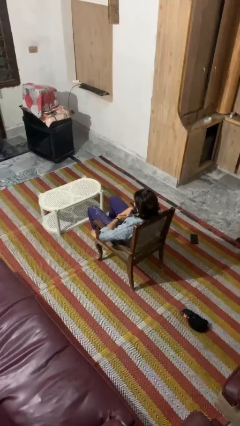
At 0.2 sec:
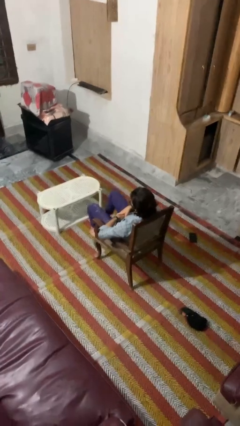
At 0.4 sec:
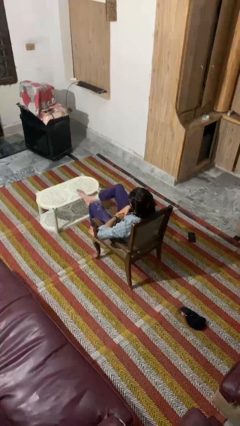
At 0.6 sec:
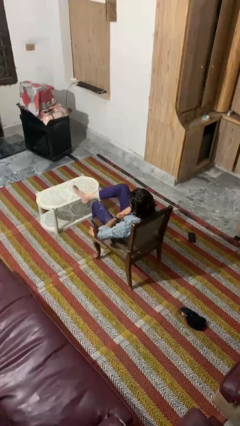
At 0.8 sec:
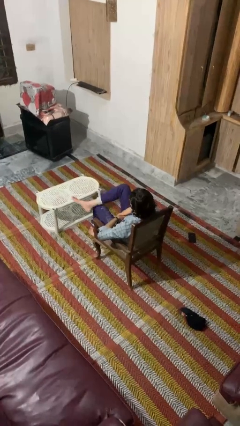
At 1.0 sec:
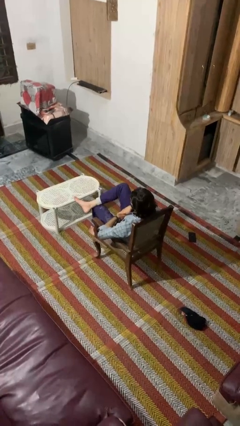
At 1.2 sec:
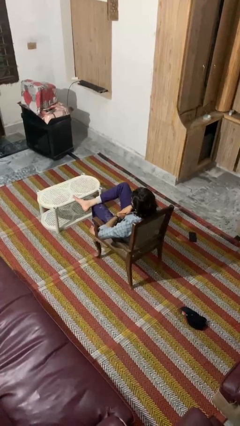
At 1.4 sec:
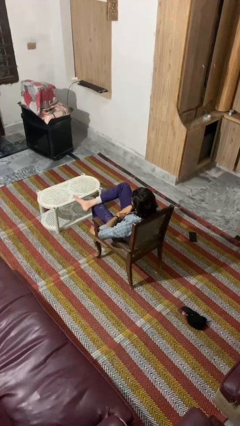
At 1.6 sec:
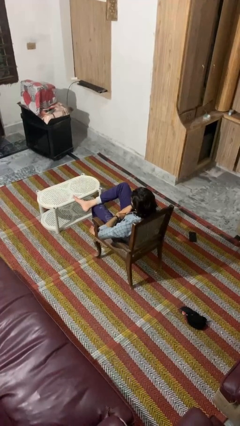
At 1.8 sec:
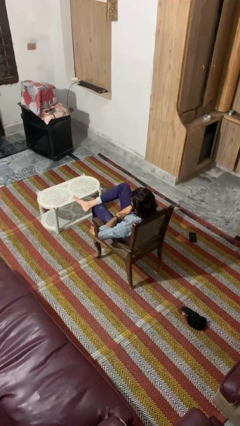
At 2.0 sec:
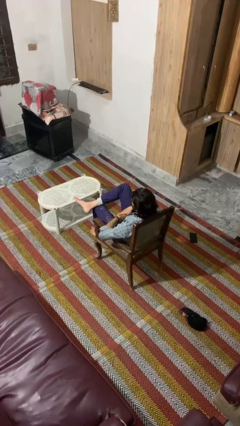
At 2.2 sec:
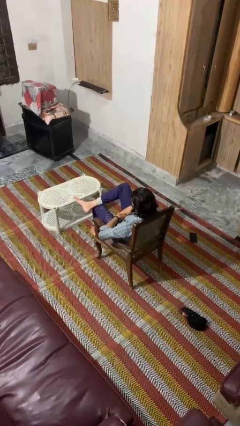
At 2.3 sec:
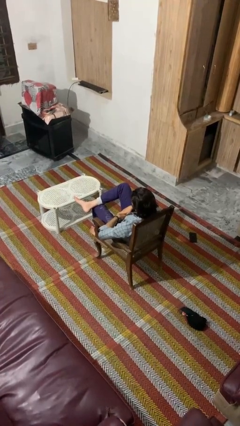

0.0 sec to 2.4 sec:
person crosses legs

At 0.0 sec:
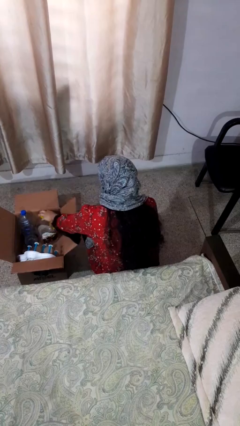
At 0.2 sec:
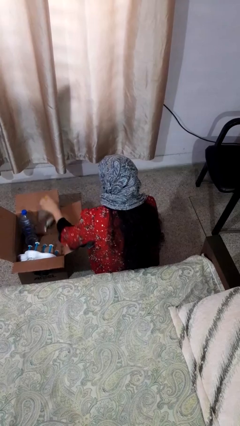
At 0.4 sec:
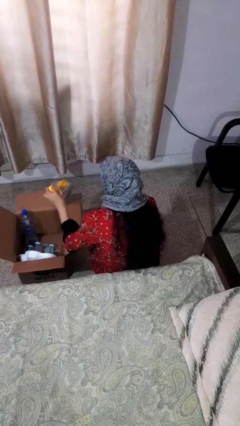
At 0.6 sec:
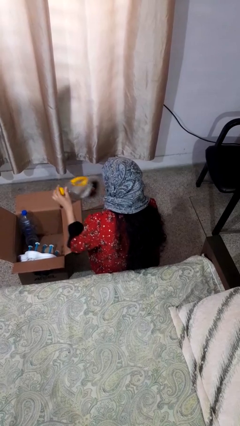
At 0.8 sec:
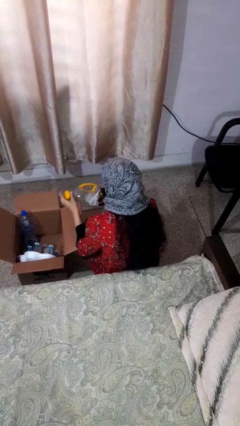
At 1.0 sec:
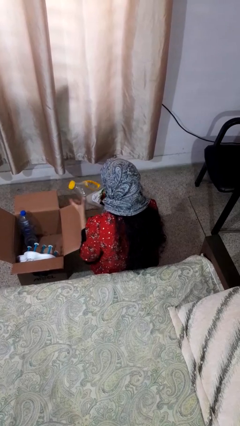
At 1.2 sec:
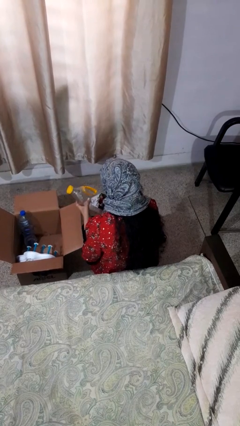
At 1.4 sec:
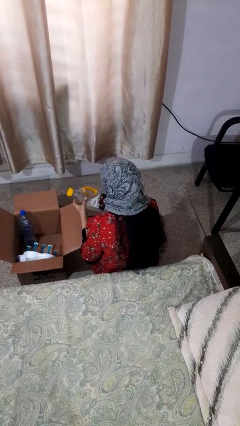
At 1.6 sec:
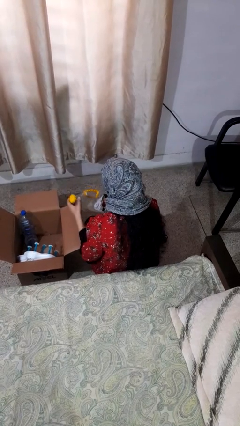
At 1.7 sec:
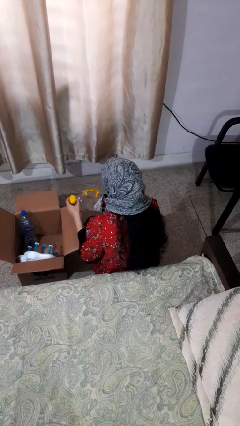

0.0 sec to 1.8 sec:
person takes object from box

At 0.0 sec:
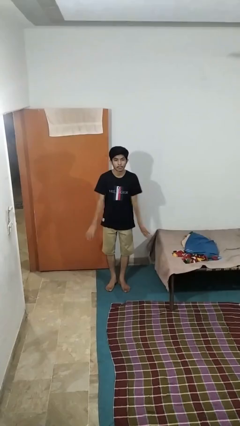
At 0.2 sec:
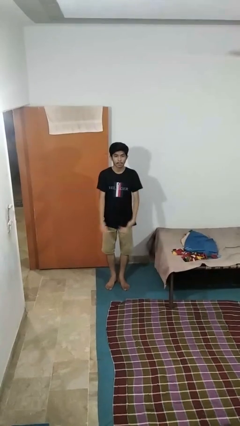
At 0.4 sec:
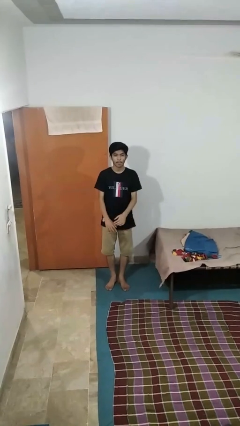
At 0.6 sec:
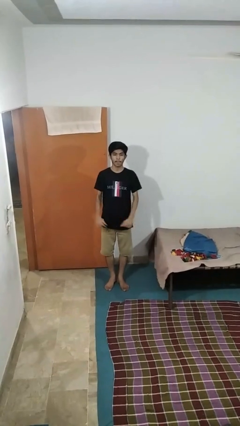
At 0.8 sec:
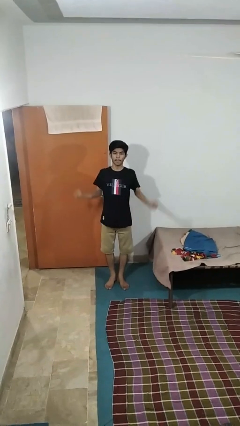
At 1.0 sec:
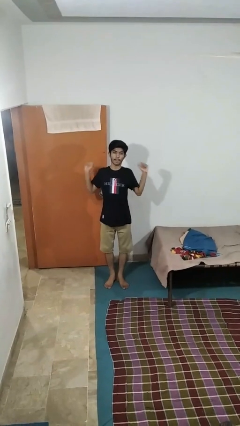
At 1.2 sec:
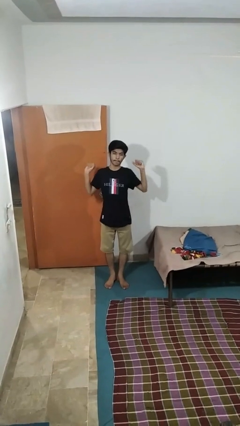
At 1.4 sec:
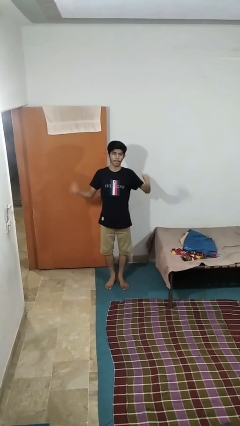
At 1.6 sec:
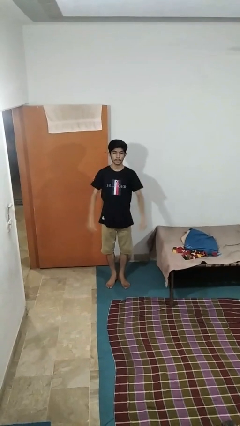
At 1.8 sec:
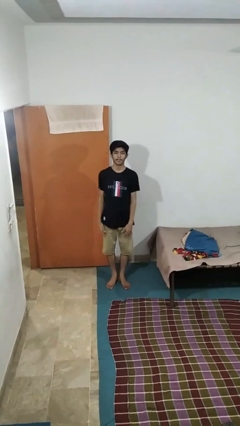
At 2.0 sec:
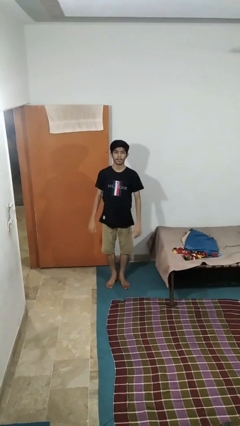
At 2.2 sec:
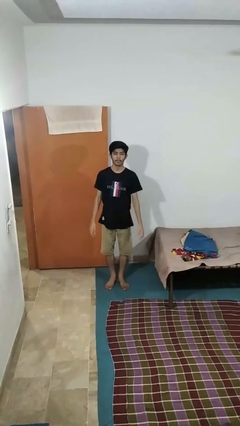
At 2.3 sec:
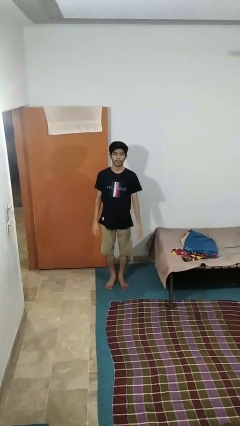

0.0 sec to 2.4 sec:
person stretches arms to side

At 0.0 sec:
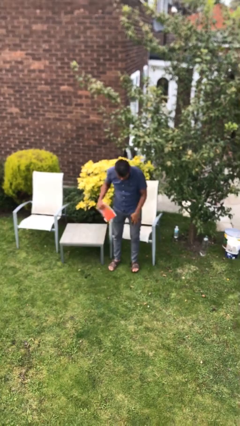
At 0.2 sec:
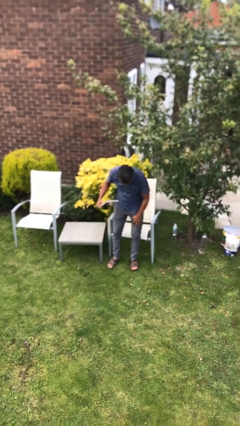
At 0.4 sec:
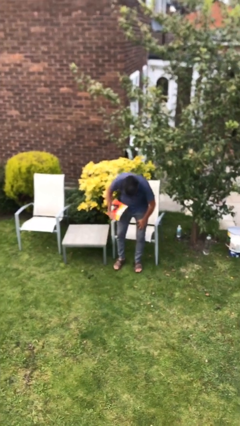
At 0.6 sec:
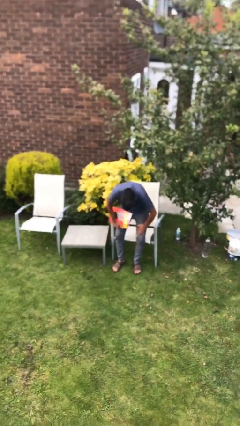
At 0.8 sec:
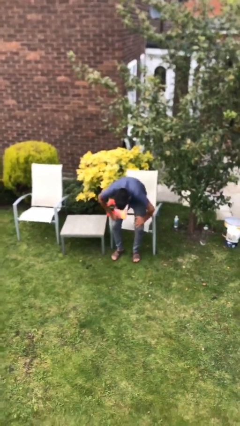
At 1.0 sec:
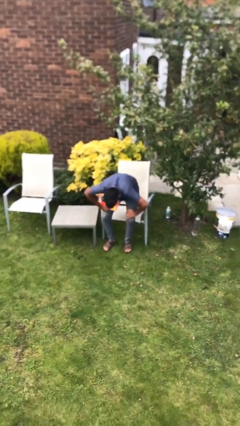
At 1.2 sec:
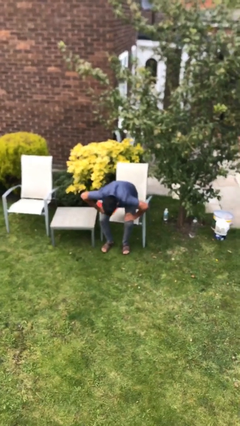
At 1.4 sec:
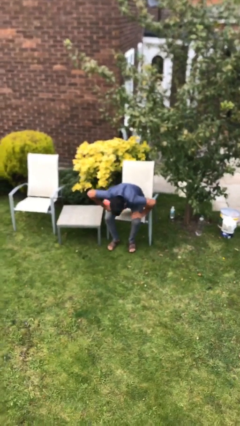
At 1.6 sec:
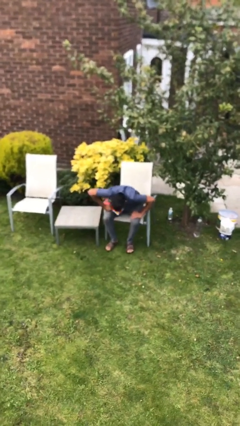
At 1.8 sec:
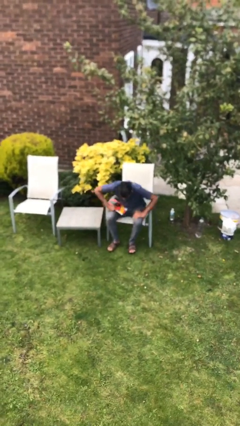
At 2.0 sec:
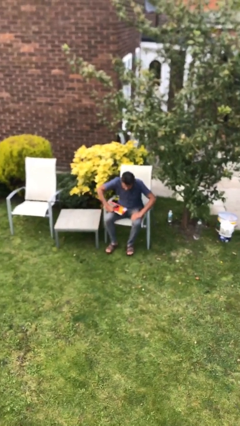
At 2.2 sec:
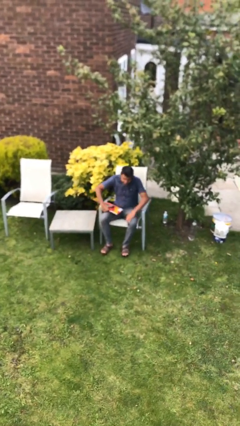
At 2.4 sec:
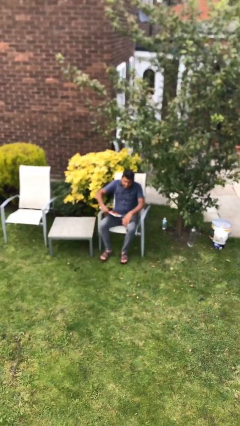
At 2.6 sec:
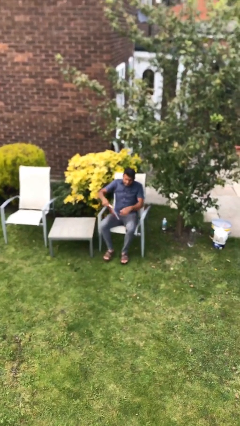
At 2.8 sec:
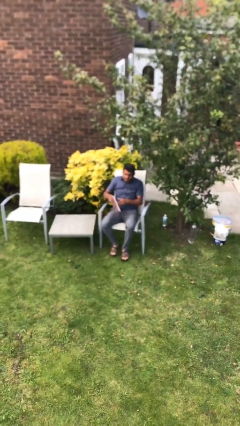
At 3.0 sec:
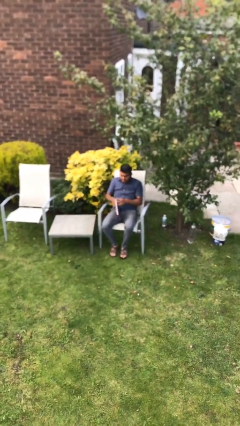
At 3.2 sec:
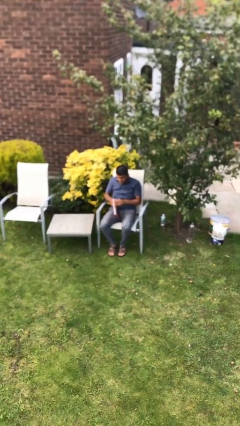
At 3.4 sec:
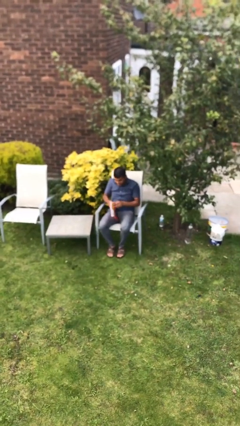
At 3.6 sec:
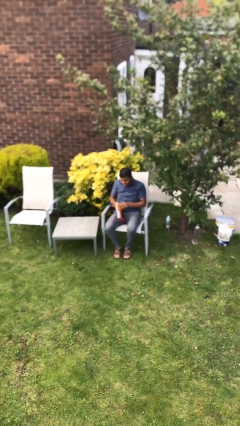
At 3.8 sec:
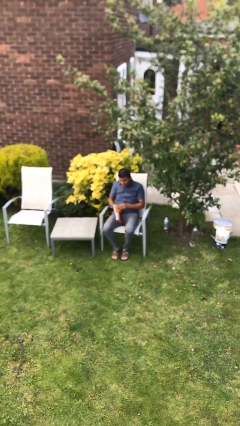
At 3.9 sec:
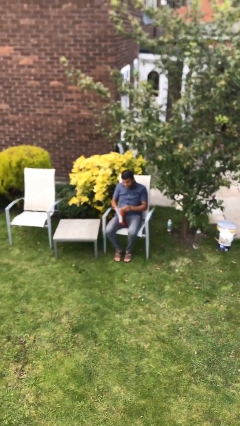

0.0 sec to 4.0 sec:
person sits down

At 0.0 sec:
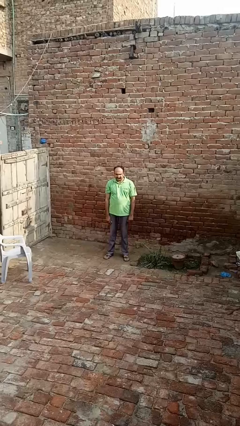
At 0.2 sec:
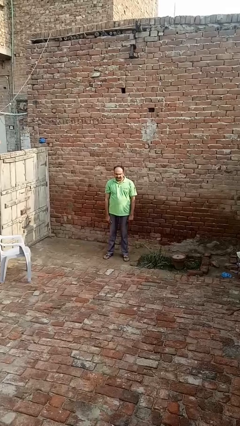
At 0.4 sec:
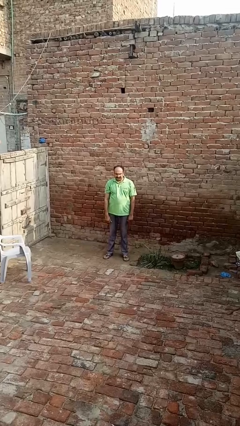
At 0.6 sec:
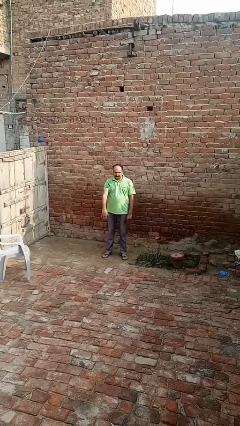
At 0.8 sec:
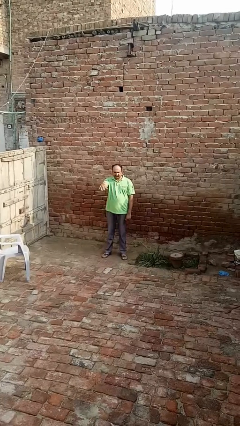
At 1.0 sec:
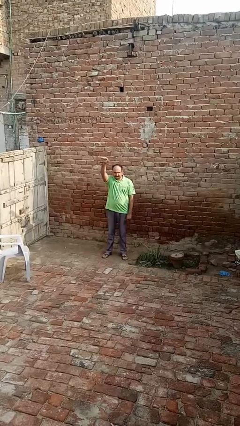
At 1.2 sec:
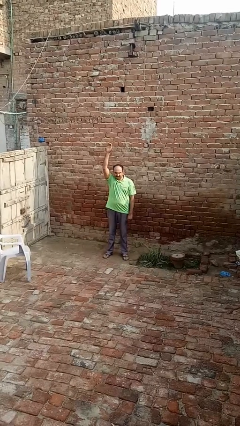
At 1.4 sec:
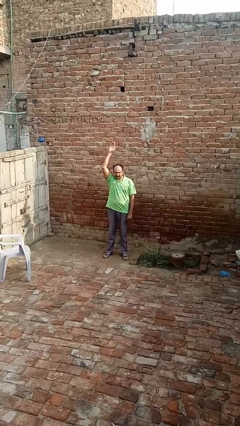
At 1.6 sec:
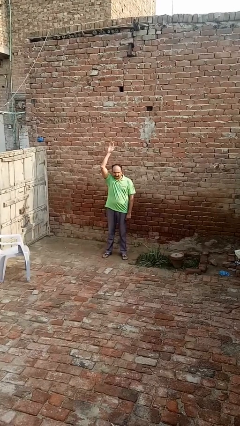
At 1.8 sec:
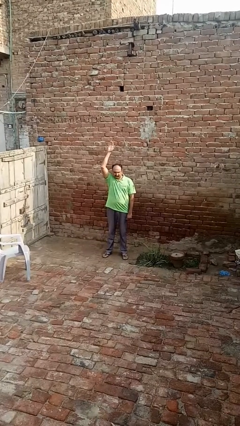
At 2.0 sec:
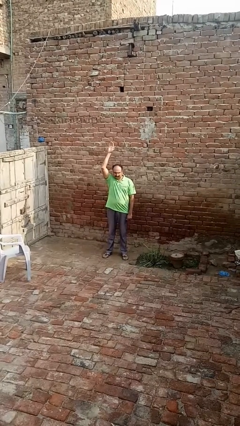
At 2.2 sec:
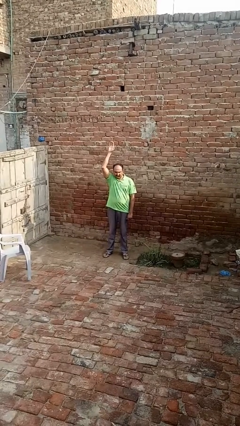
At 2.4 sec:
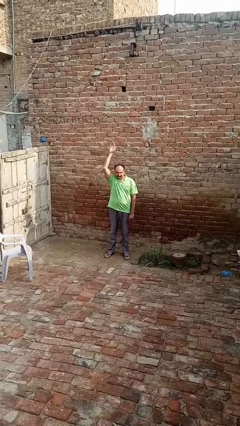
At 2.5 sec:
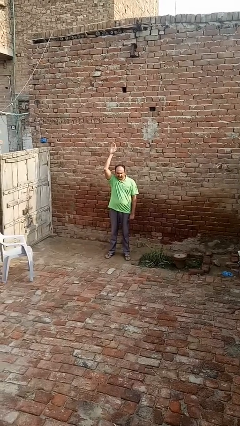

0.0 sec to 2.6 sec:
person gestures swipe up

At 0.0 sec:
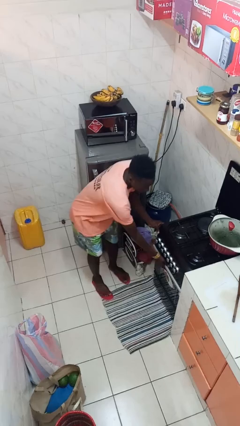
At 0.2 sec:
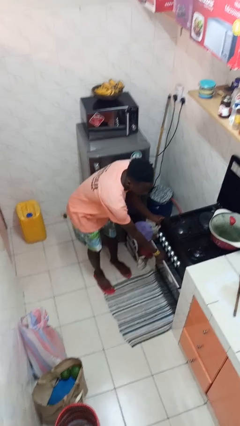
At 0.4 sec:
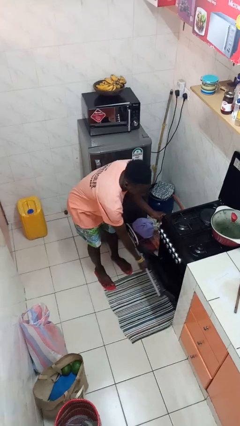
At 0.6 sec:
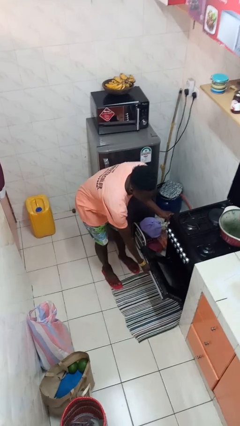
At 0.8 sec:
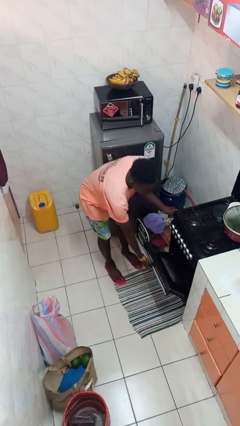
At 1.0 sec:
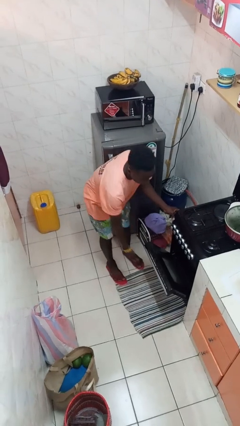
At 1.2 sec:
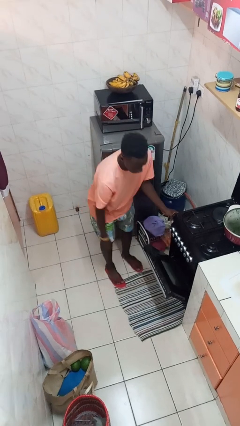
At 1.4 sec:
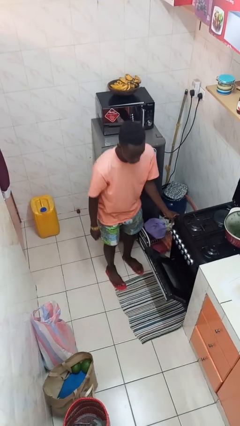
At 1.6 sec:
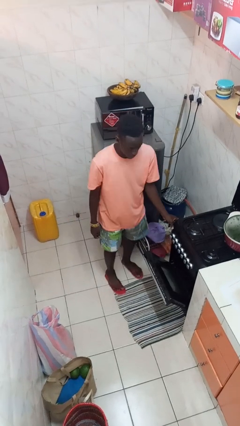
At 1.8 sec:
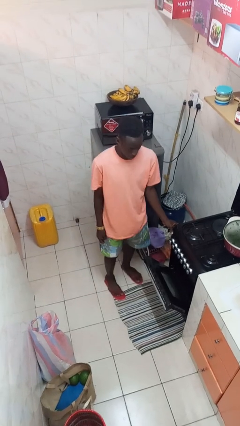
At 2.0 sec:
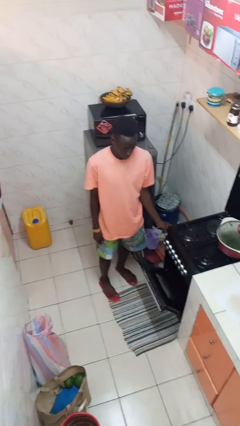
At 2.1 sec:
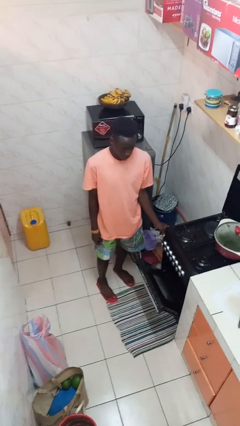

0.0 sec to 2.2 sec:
person opens oven door

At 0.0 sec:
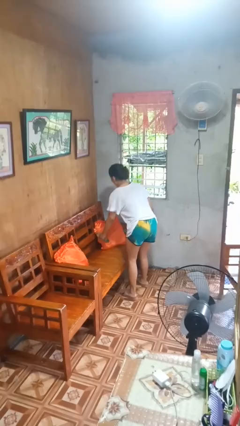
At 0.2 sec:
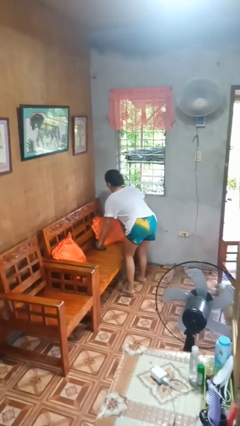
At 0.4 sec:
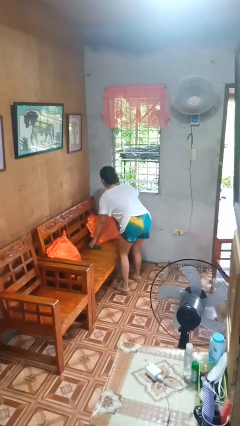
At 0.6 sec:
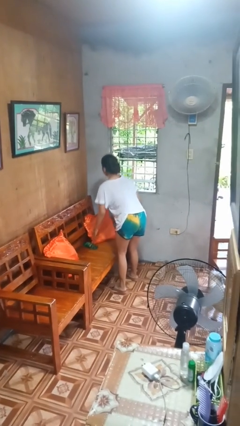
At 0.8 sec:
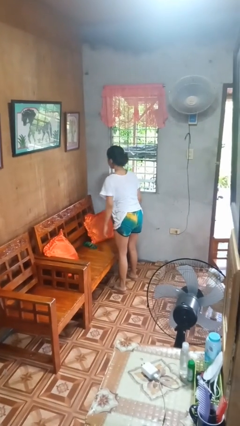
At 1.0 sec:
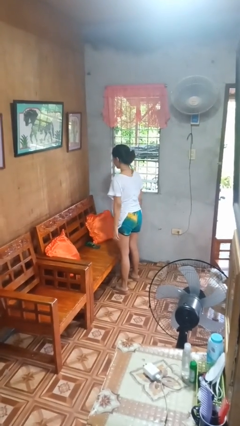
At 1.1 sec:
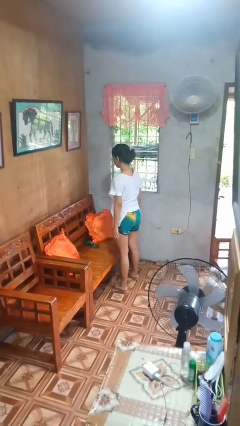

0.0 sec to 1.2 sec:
person puts down object on couch
